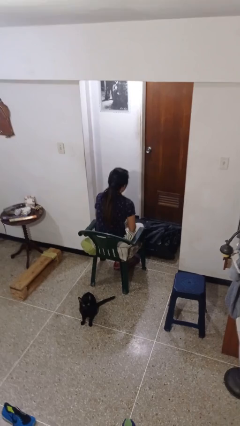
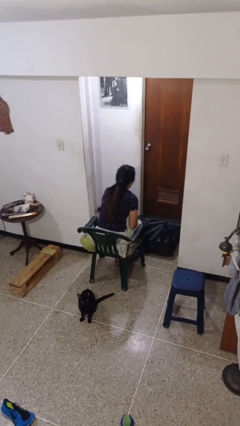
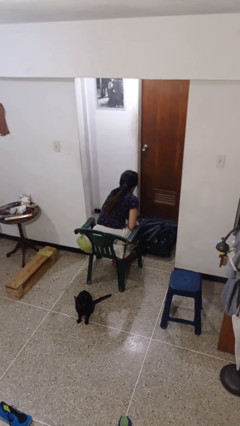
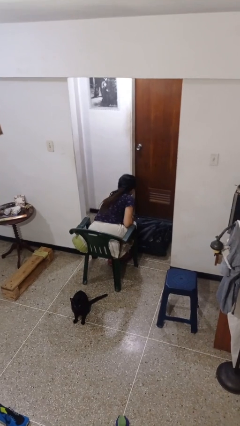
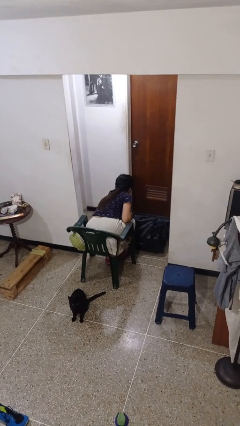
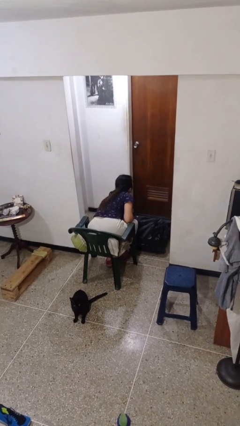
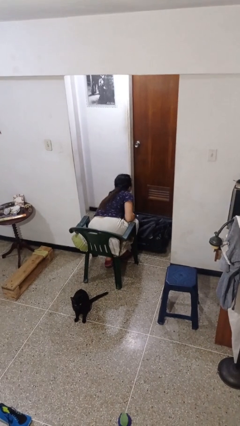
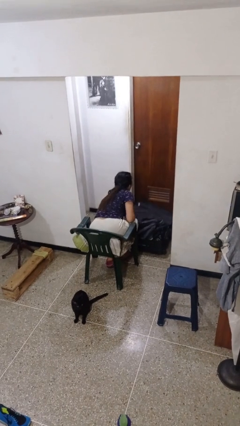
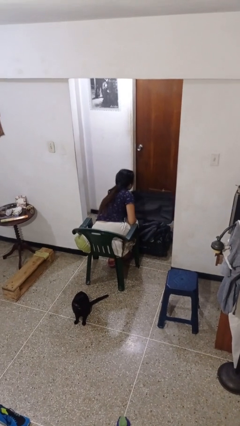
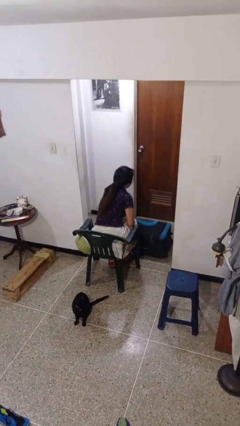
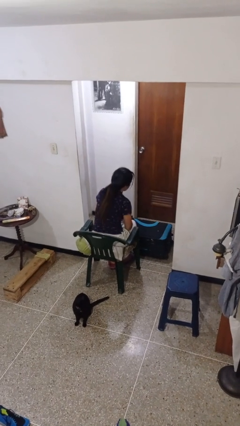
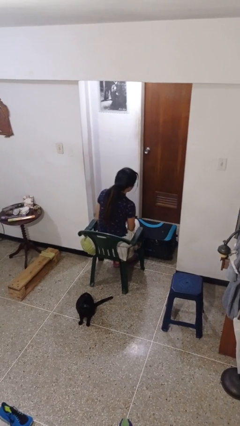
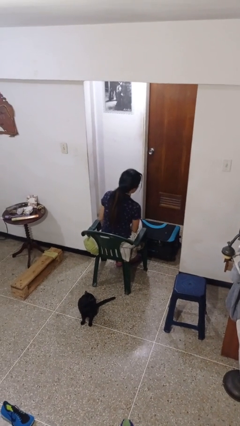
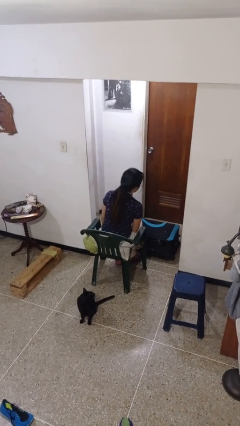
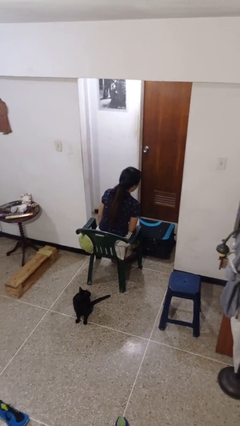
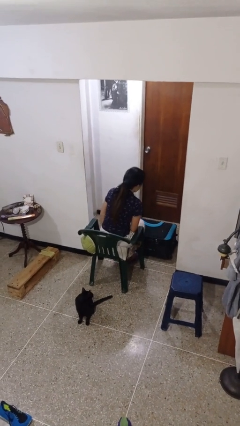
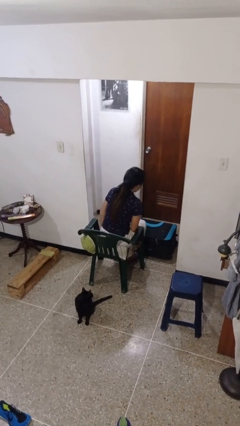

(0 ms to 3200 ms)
person closes suitcase

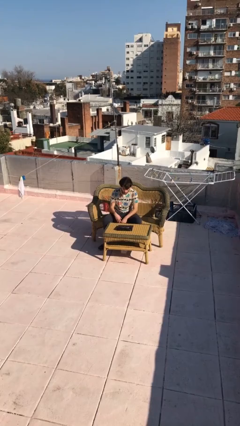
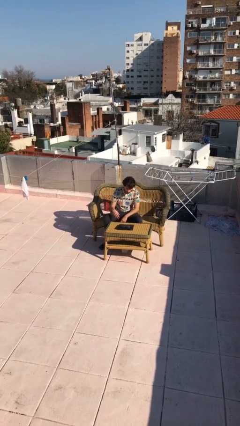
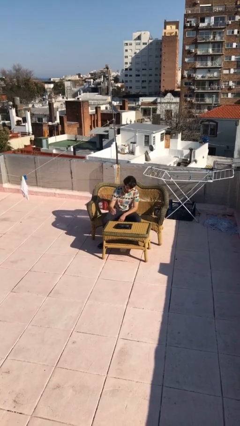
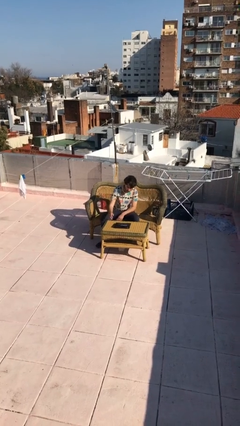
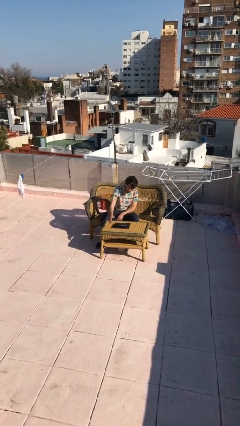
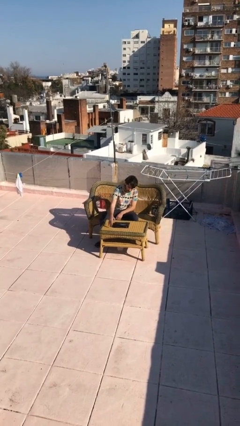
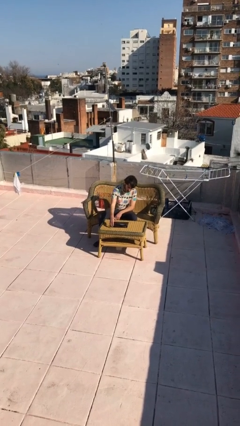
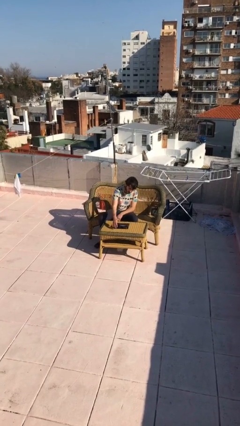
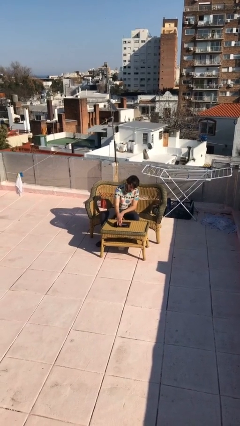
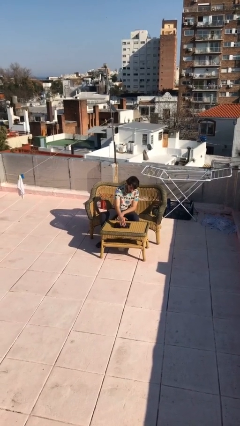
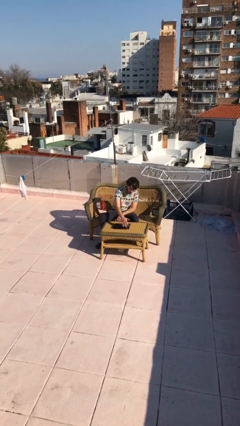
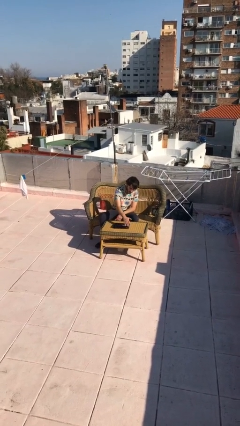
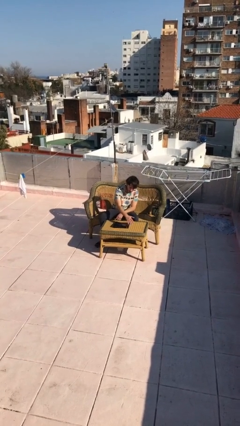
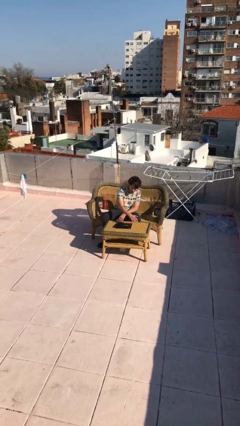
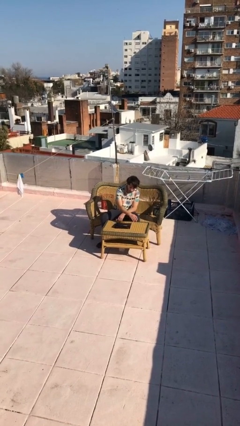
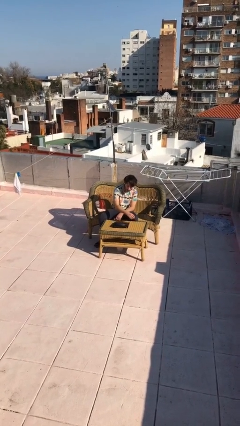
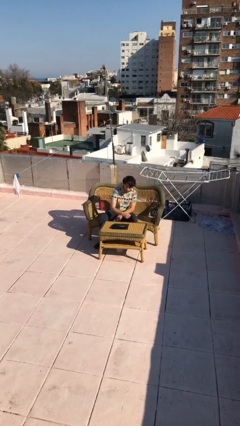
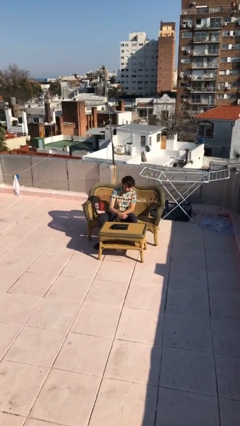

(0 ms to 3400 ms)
person waves hand over object

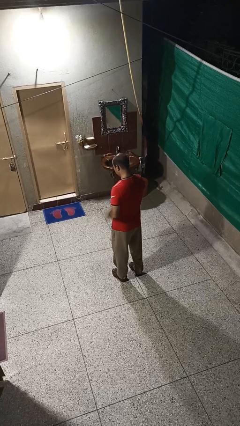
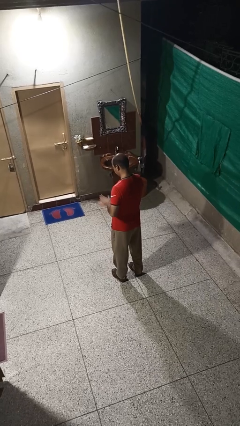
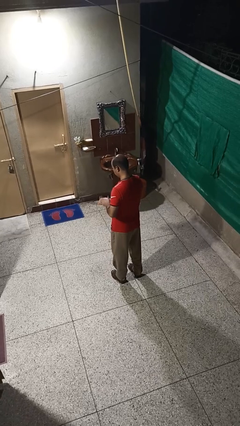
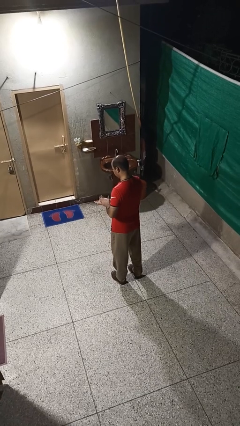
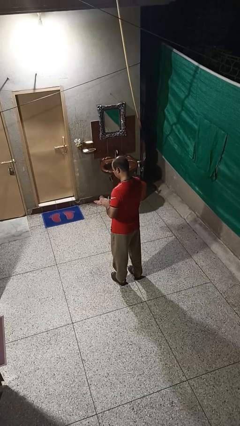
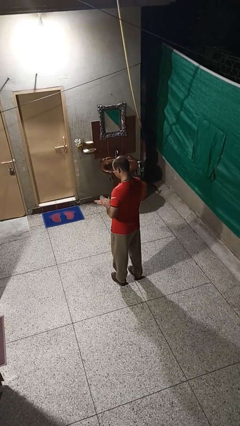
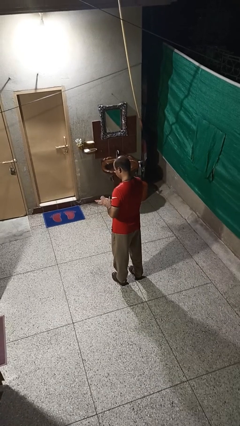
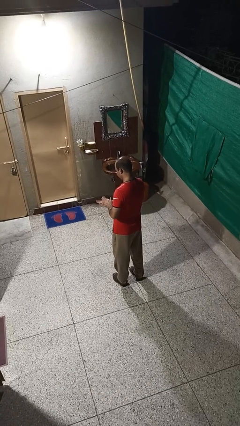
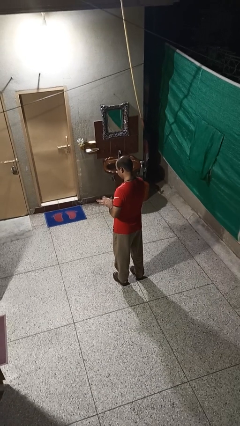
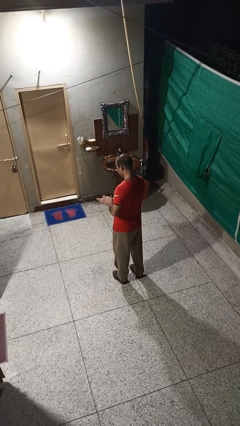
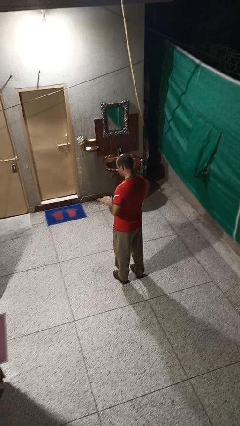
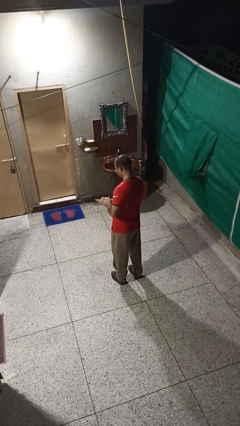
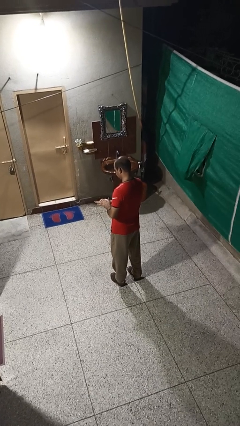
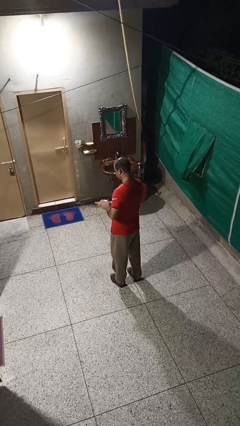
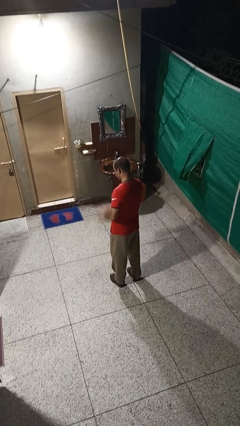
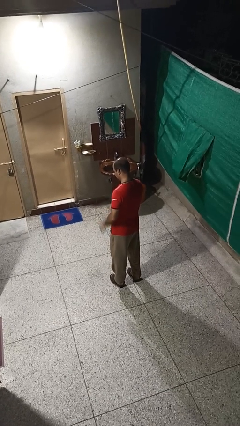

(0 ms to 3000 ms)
person claps hands

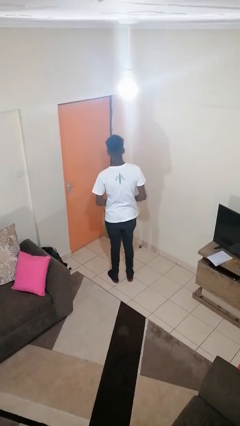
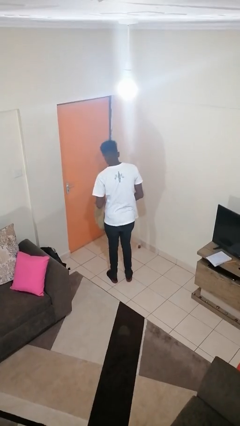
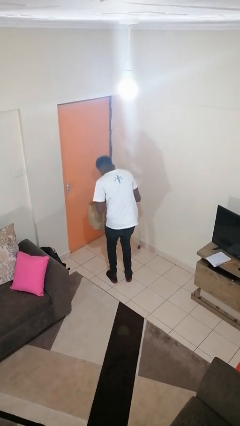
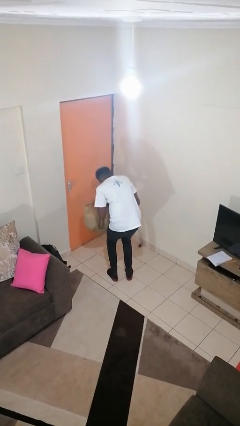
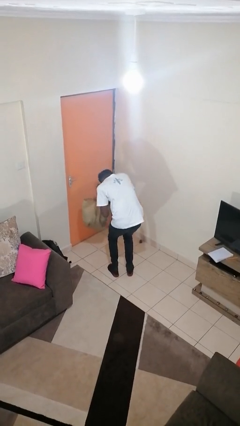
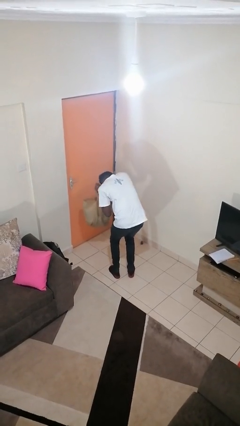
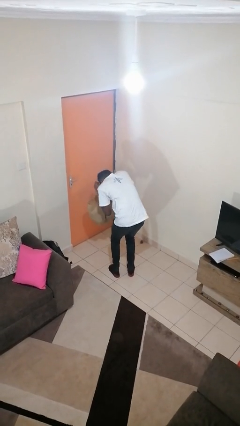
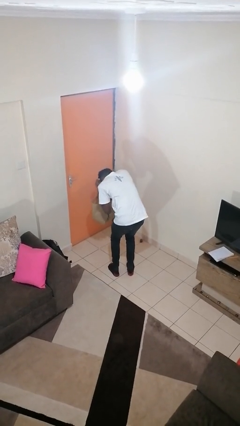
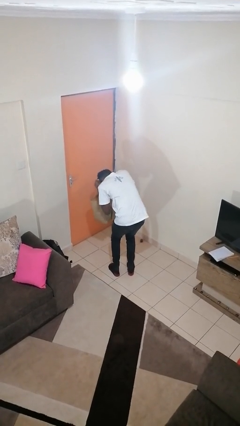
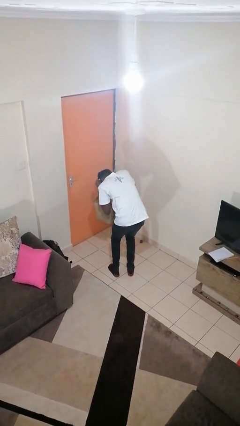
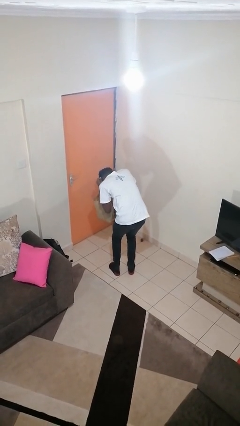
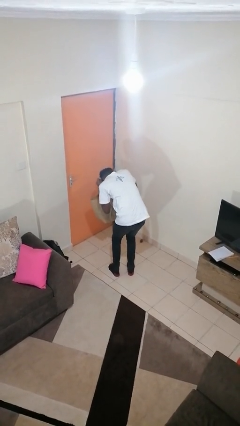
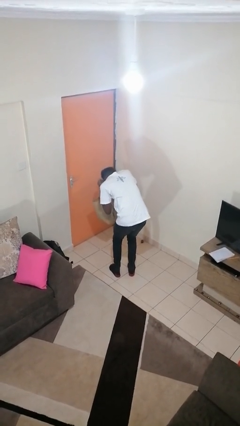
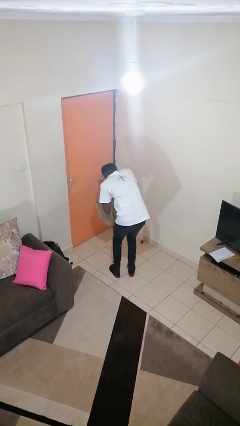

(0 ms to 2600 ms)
person searches in bag

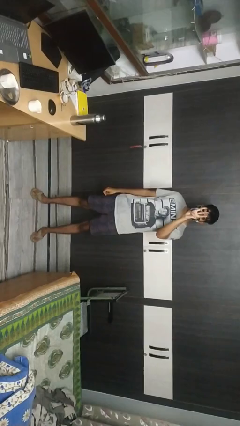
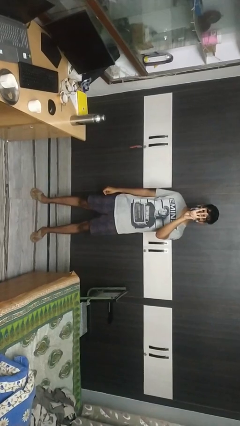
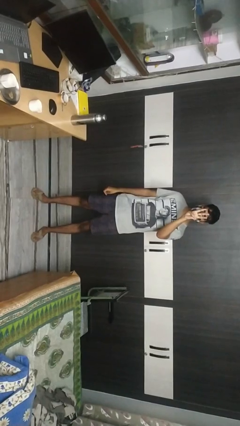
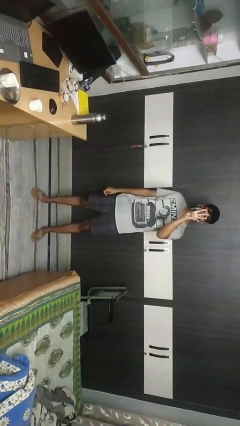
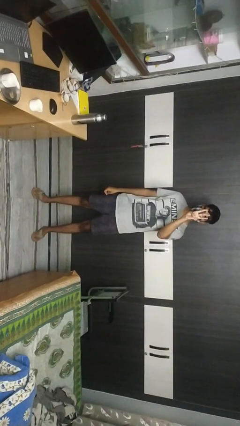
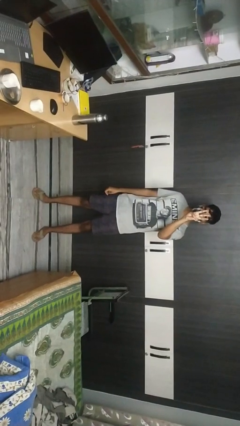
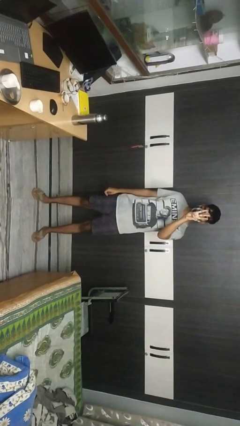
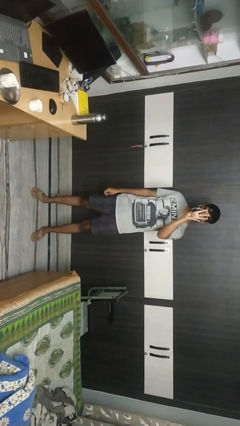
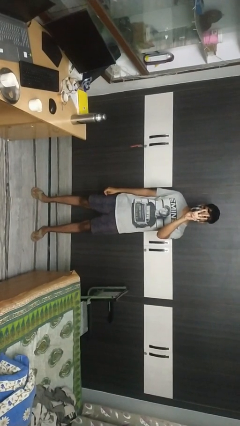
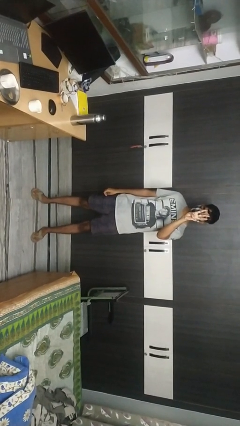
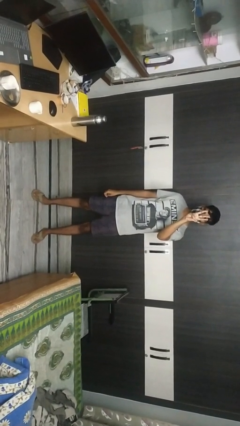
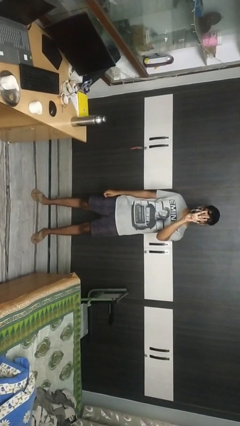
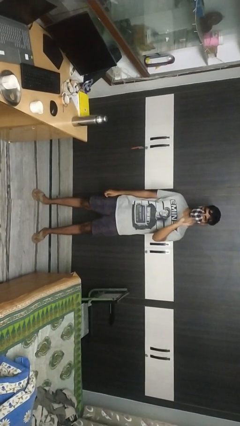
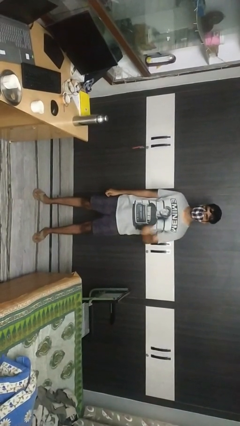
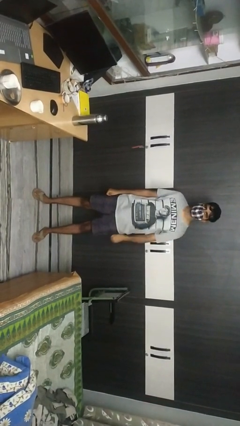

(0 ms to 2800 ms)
person gestures number three

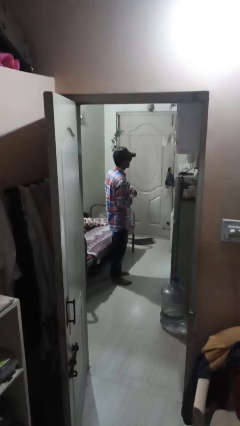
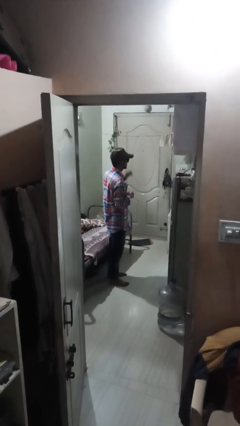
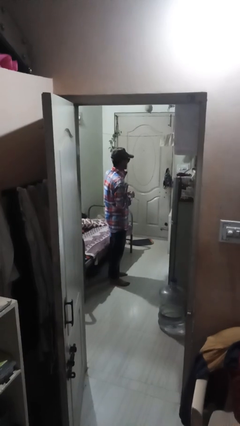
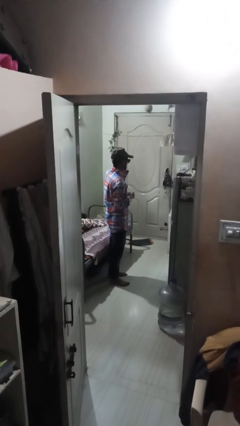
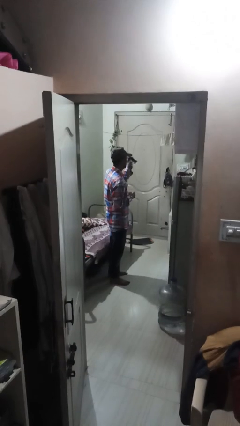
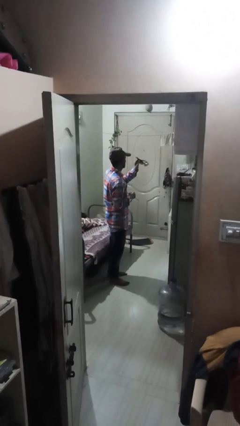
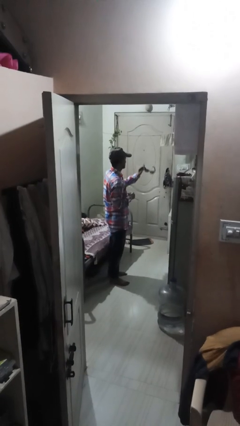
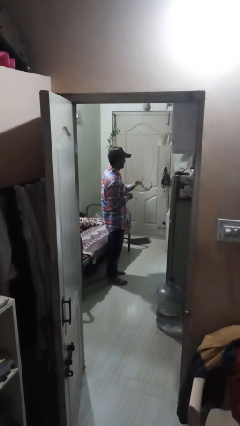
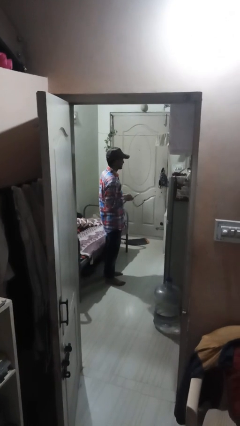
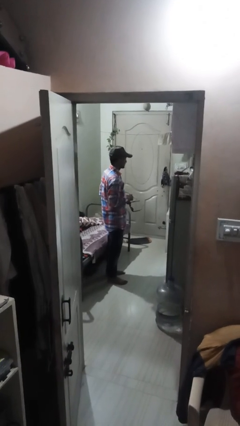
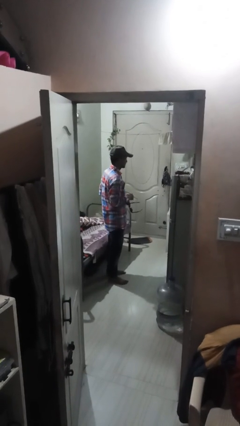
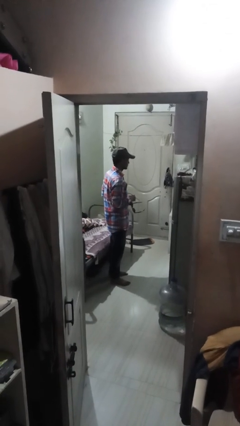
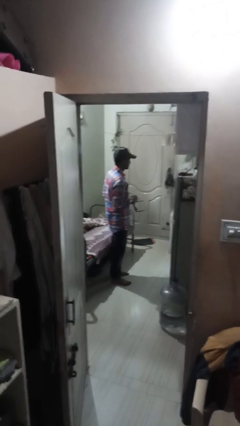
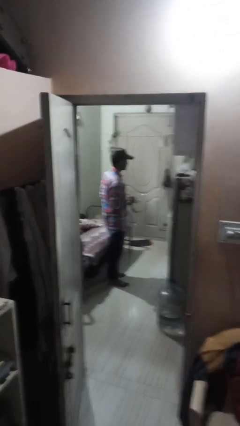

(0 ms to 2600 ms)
person takes off sunglasses
